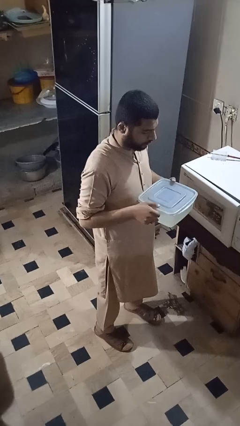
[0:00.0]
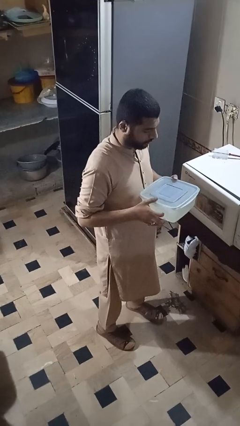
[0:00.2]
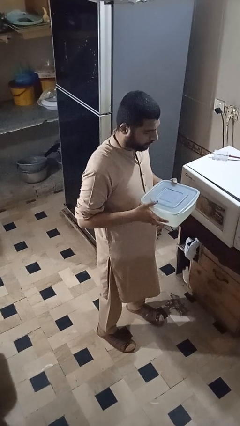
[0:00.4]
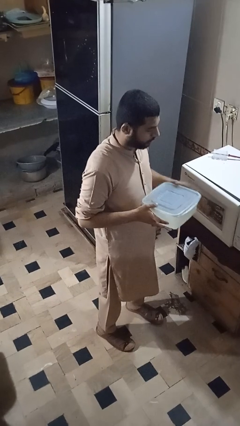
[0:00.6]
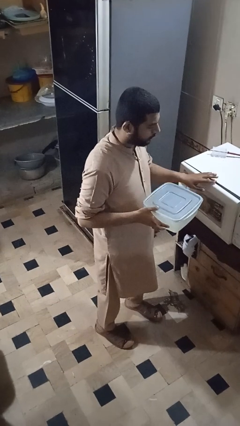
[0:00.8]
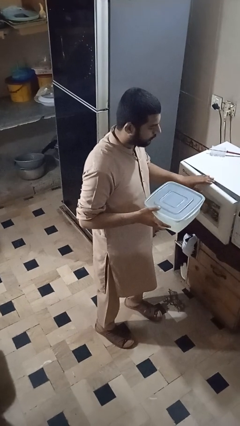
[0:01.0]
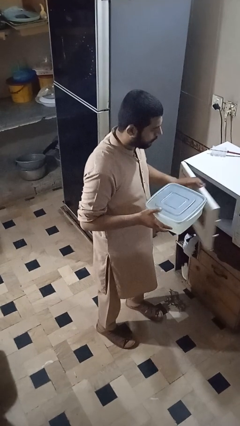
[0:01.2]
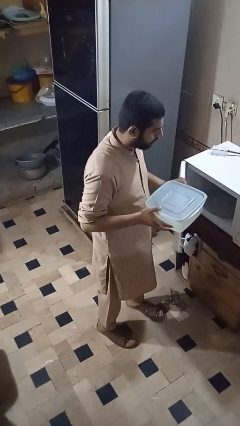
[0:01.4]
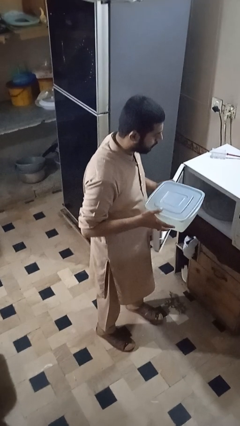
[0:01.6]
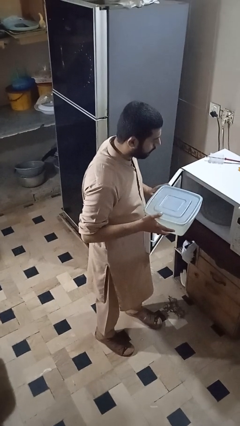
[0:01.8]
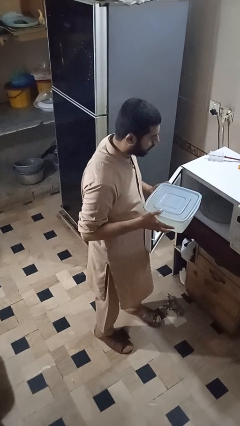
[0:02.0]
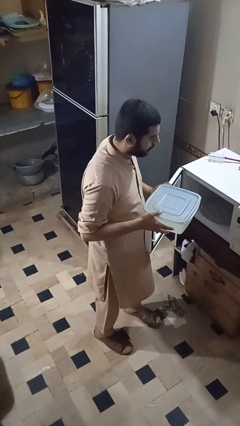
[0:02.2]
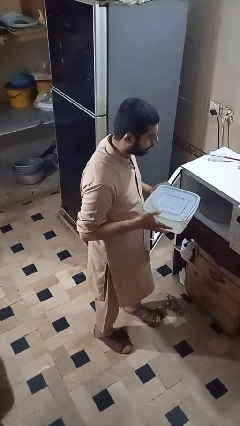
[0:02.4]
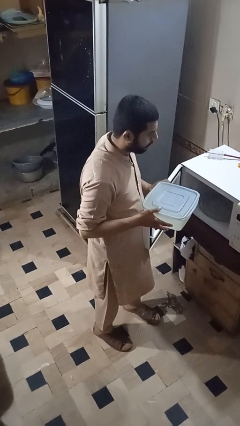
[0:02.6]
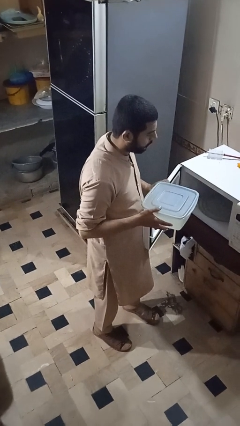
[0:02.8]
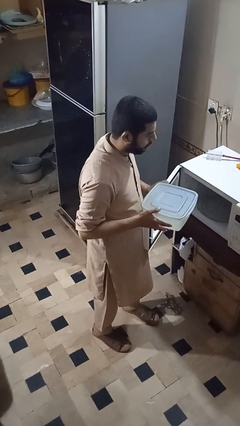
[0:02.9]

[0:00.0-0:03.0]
person opens microwave

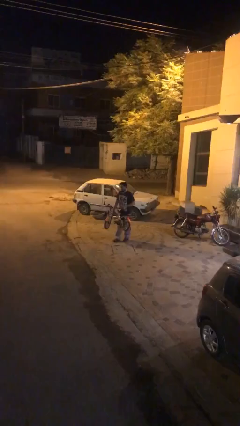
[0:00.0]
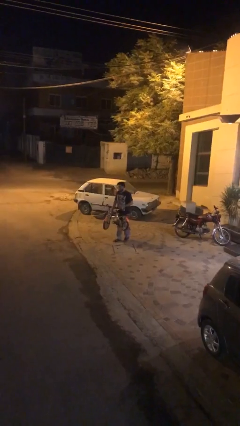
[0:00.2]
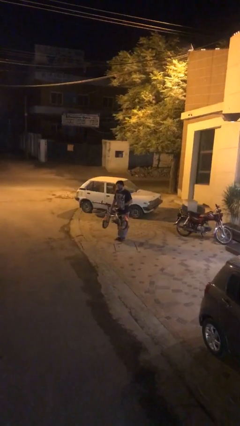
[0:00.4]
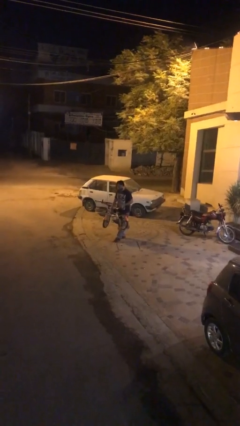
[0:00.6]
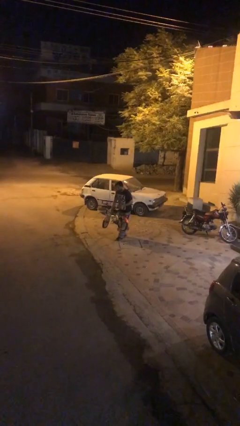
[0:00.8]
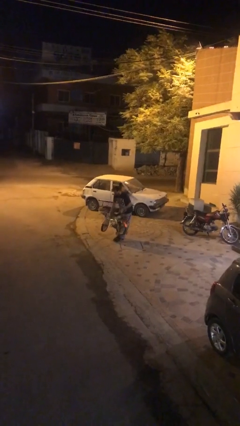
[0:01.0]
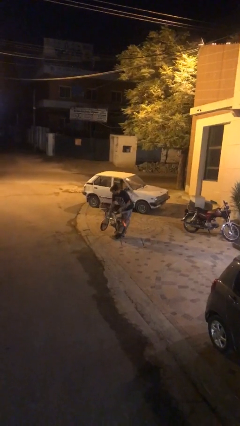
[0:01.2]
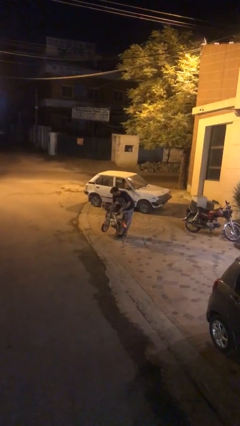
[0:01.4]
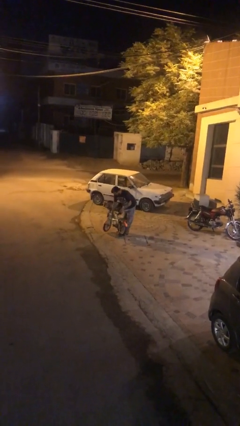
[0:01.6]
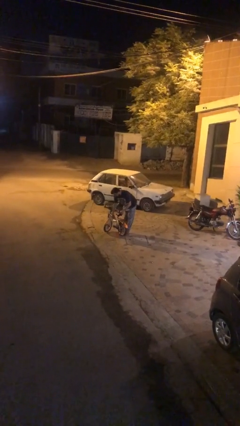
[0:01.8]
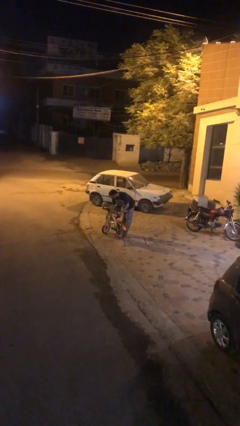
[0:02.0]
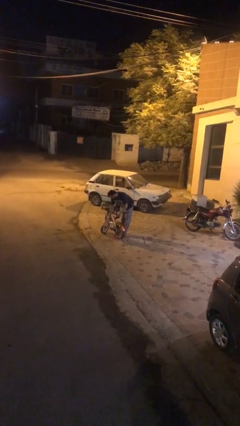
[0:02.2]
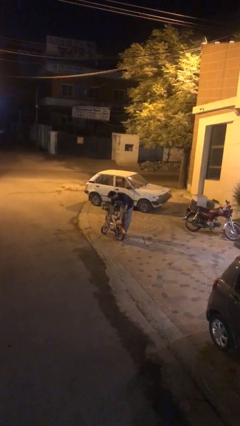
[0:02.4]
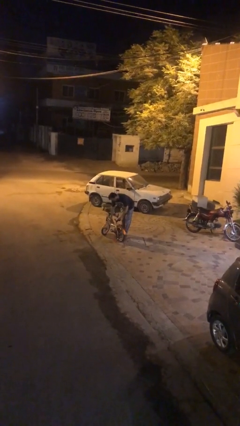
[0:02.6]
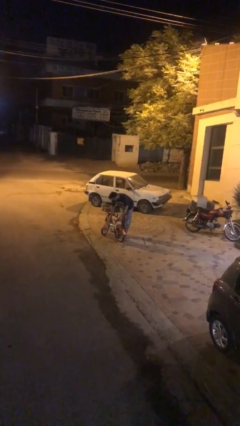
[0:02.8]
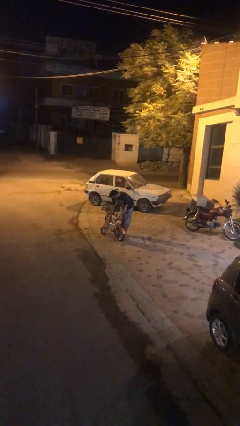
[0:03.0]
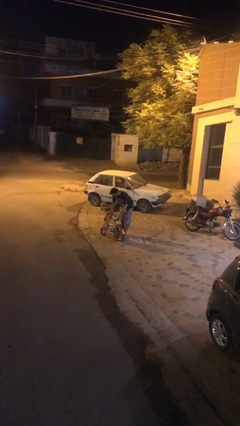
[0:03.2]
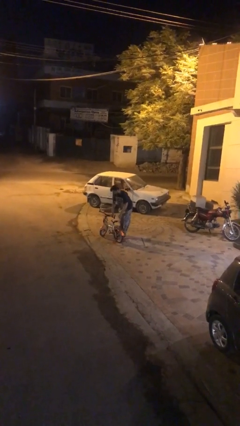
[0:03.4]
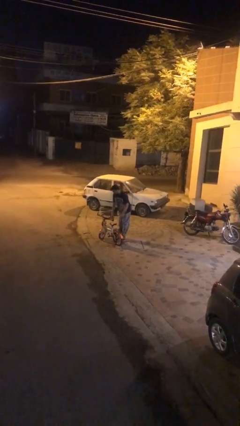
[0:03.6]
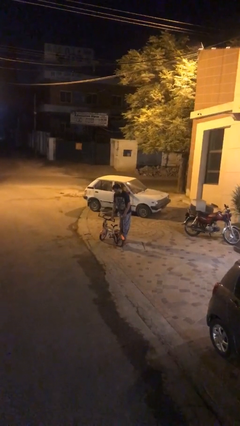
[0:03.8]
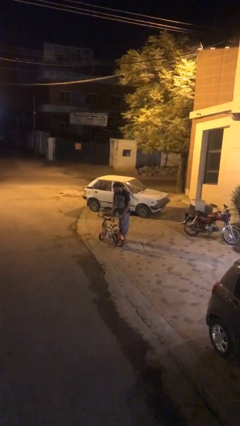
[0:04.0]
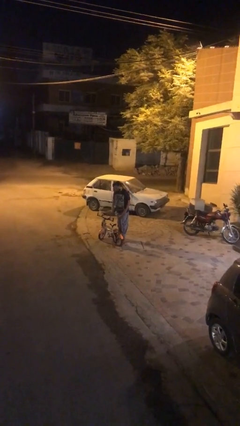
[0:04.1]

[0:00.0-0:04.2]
person puts down object on floor

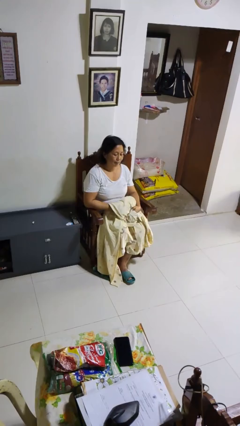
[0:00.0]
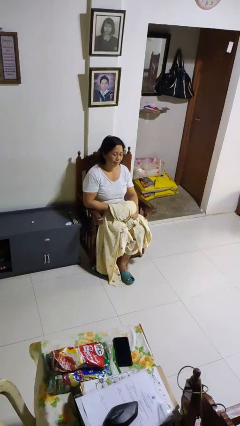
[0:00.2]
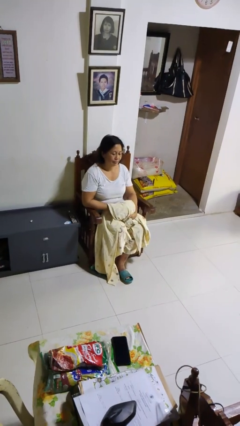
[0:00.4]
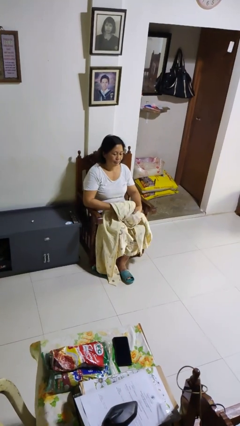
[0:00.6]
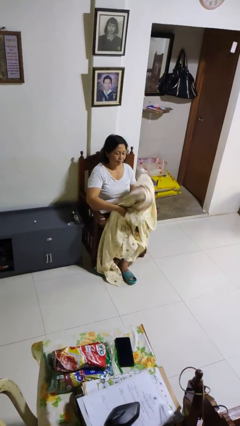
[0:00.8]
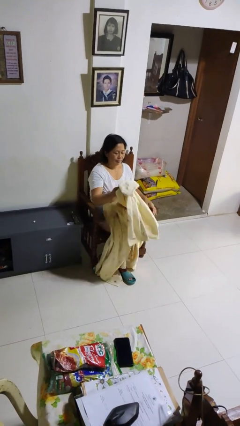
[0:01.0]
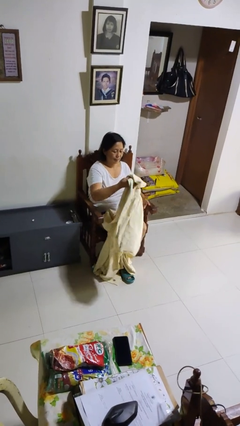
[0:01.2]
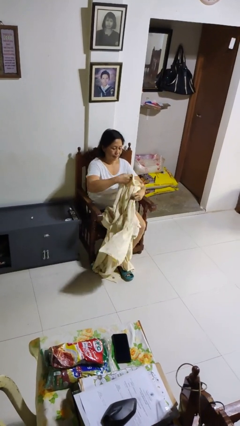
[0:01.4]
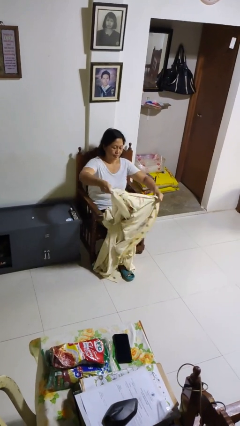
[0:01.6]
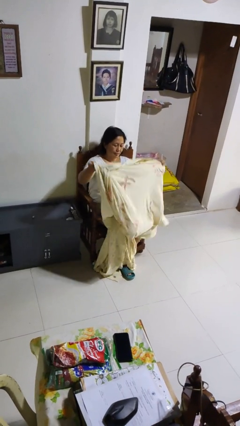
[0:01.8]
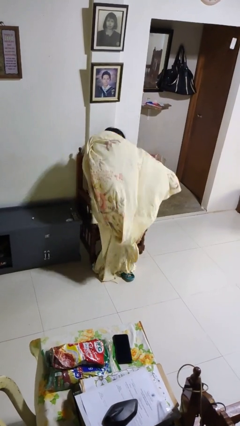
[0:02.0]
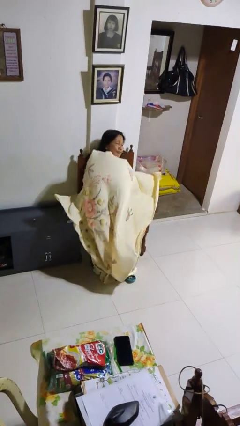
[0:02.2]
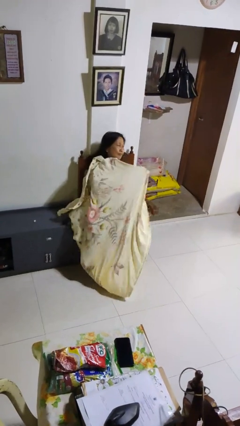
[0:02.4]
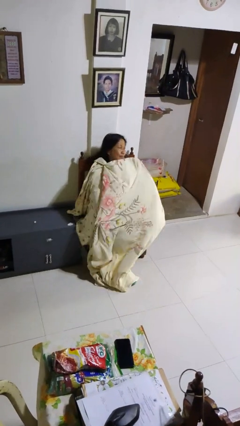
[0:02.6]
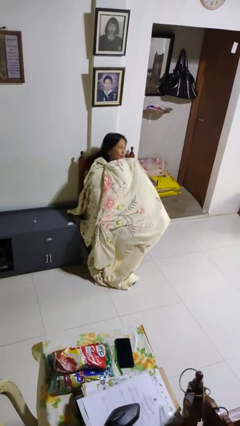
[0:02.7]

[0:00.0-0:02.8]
person covers with blanket

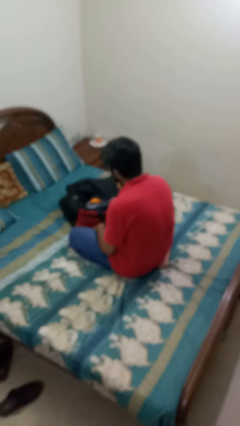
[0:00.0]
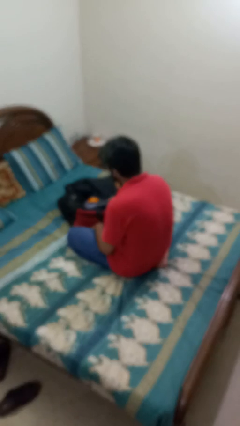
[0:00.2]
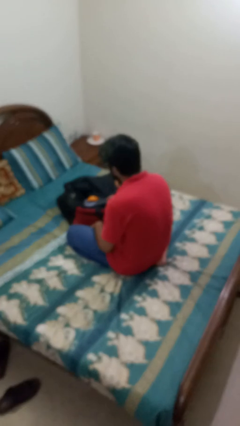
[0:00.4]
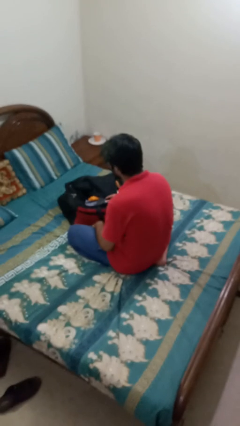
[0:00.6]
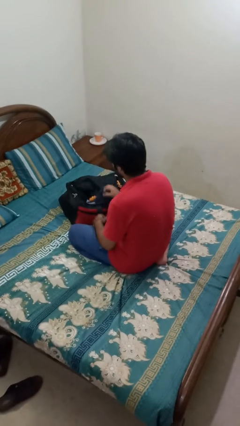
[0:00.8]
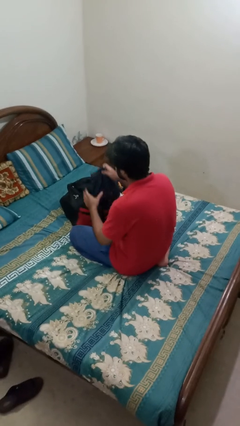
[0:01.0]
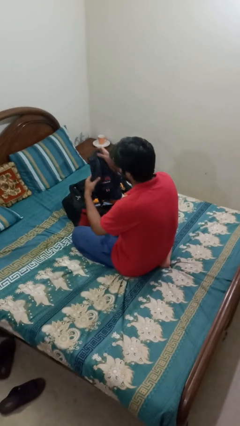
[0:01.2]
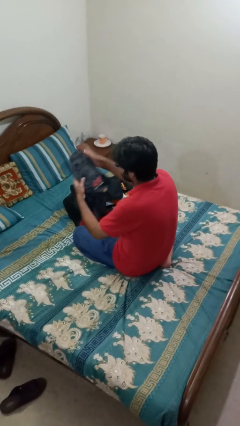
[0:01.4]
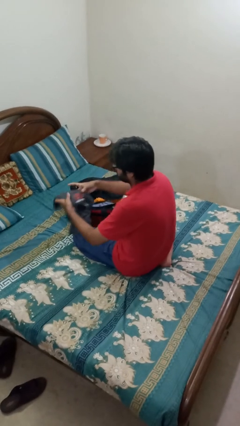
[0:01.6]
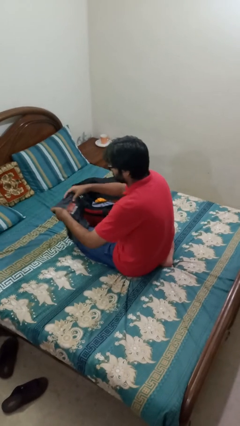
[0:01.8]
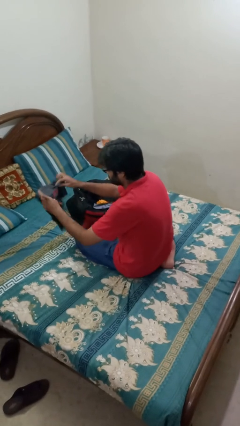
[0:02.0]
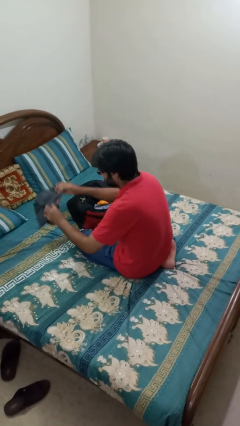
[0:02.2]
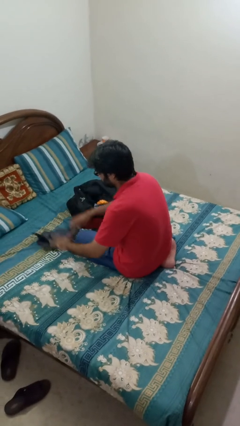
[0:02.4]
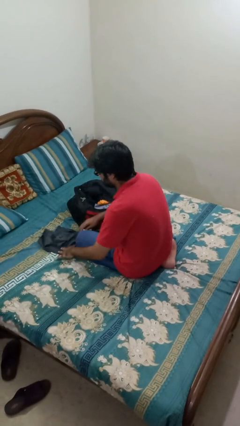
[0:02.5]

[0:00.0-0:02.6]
person unloads clothes from suitcase

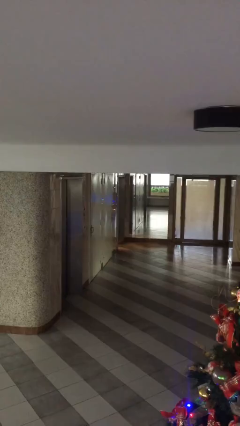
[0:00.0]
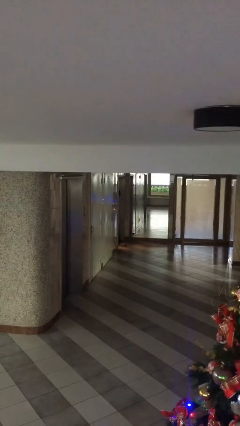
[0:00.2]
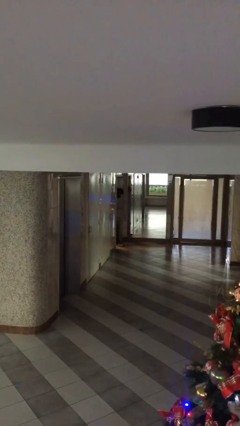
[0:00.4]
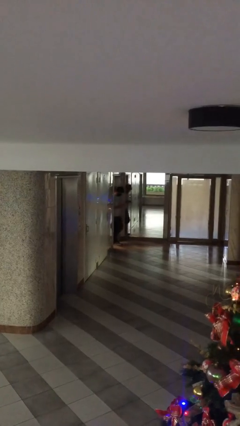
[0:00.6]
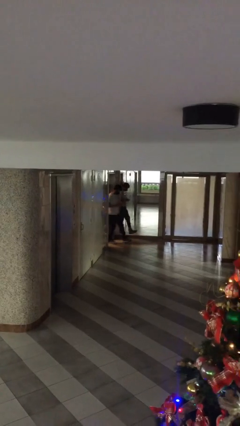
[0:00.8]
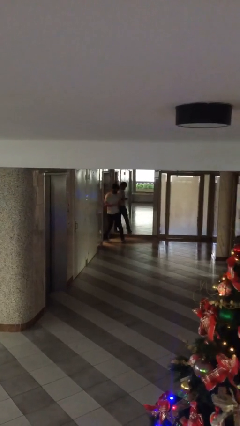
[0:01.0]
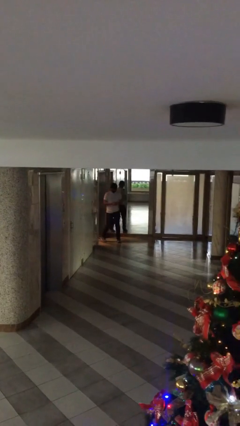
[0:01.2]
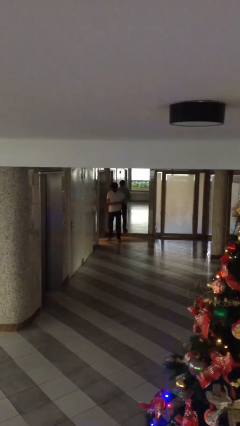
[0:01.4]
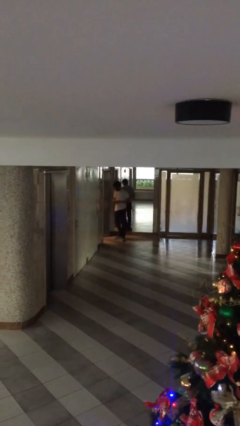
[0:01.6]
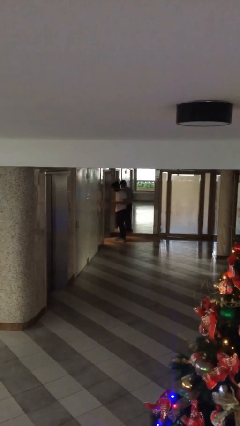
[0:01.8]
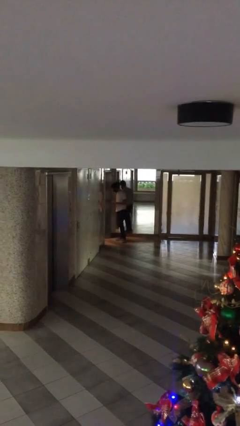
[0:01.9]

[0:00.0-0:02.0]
person enters scene through structure

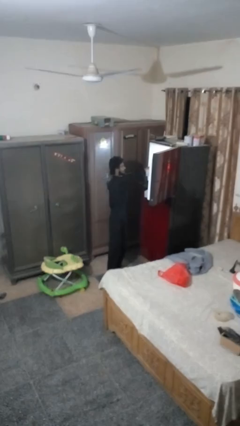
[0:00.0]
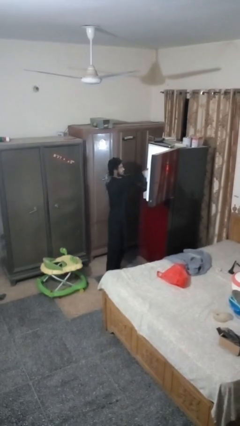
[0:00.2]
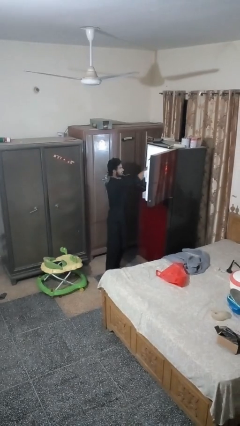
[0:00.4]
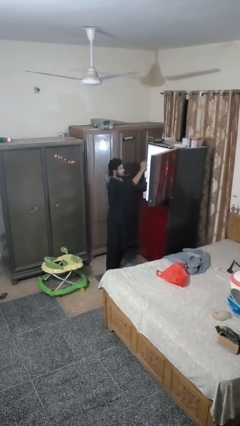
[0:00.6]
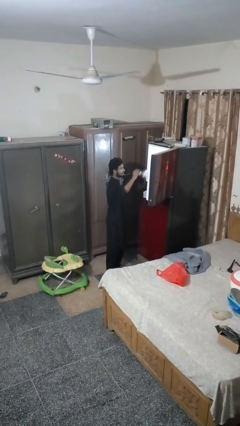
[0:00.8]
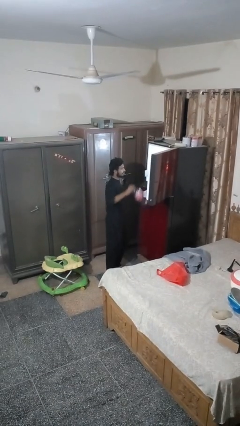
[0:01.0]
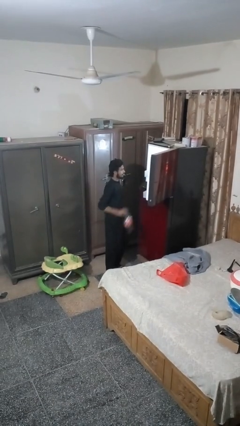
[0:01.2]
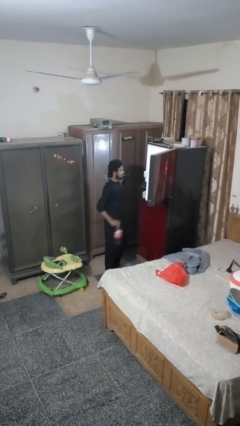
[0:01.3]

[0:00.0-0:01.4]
person takes object from refrigerator

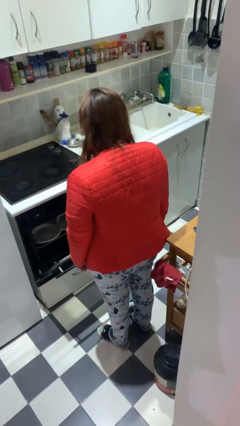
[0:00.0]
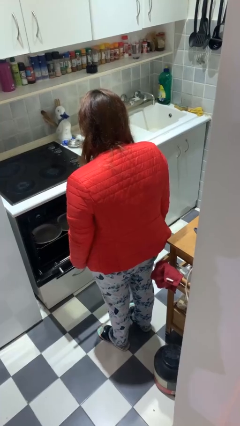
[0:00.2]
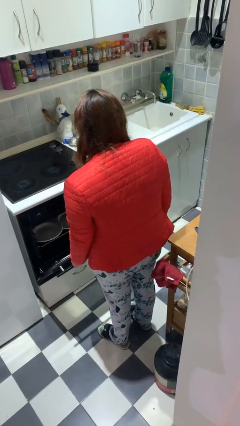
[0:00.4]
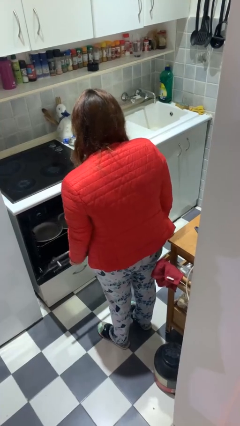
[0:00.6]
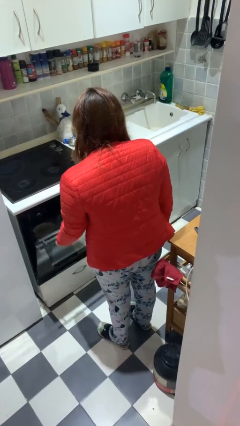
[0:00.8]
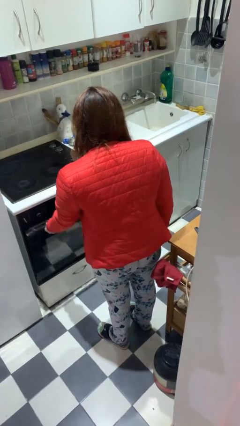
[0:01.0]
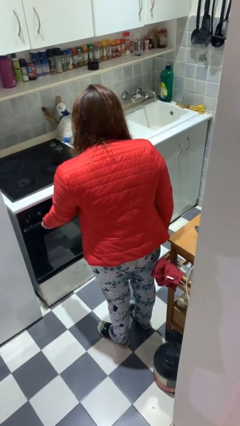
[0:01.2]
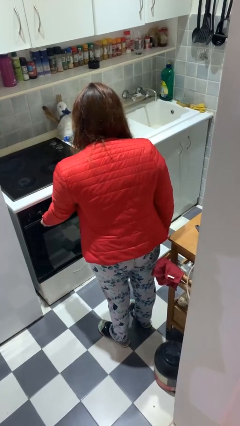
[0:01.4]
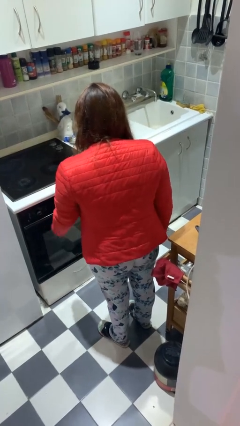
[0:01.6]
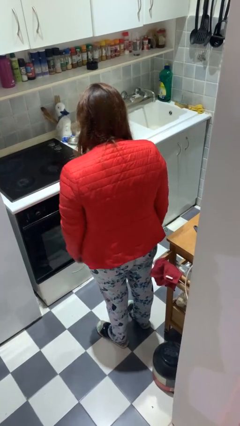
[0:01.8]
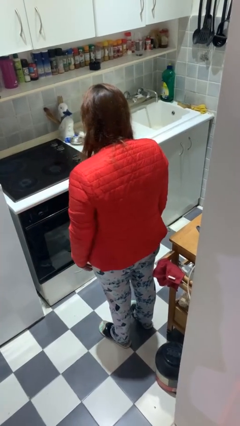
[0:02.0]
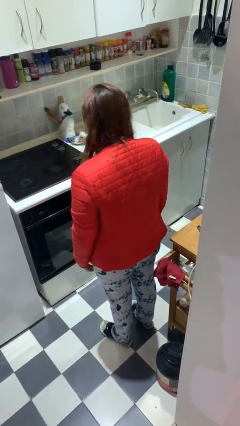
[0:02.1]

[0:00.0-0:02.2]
person closes dishwasher
